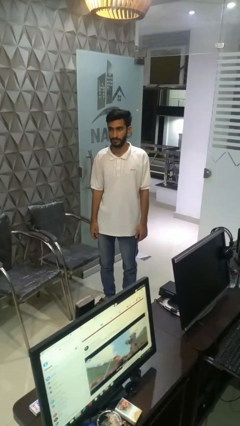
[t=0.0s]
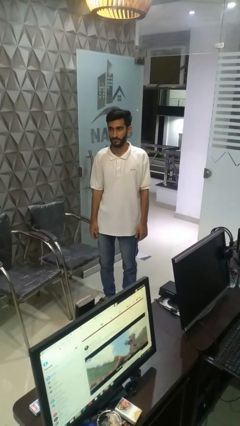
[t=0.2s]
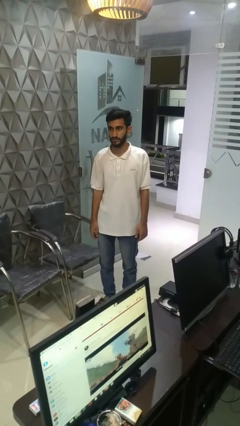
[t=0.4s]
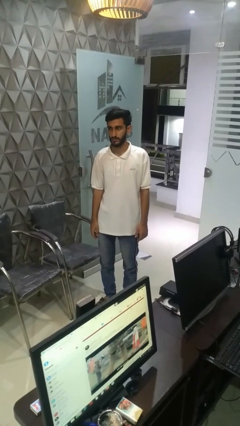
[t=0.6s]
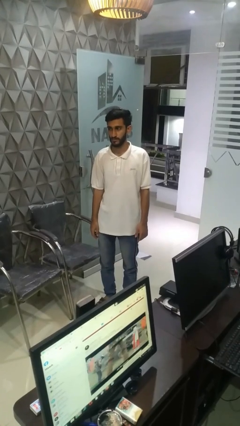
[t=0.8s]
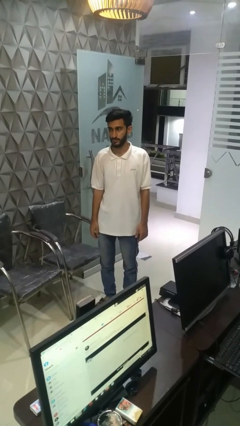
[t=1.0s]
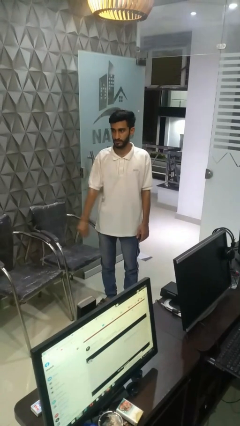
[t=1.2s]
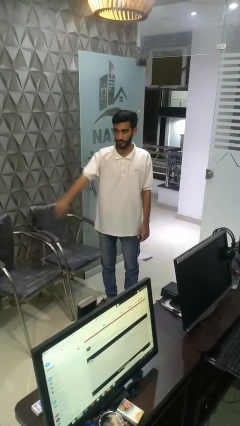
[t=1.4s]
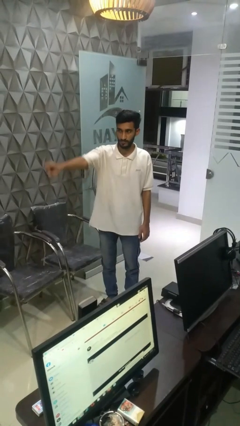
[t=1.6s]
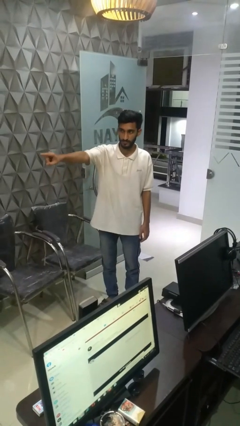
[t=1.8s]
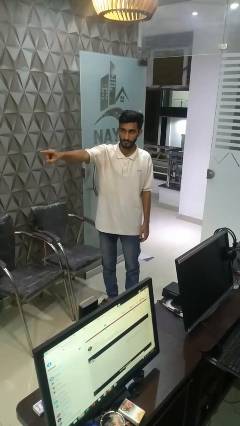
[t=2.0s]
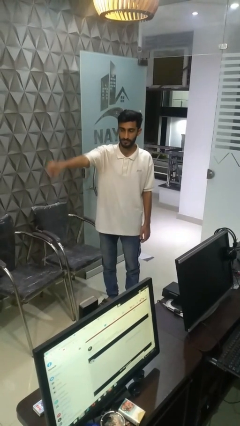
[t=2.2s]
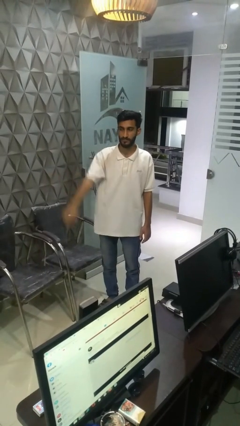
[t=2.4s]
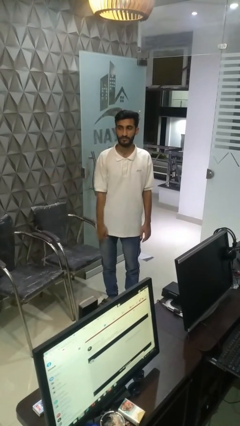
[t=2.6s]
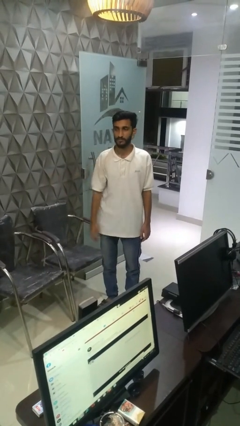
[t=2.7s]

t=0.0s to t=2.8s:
person points at person

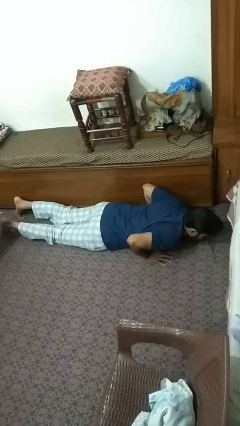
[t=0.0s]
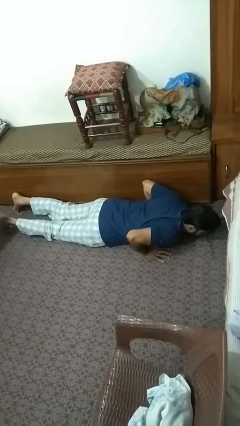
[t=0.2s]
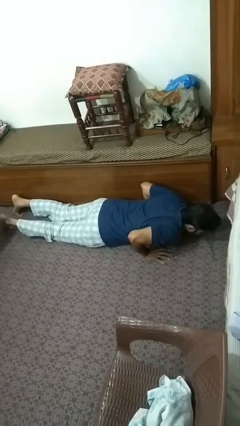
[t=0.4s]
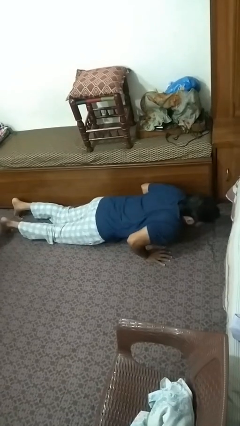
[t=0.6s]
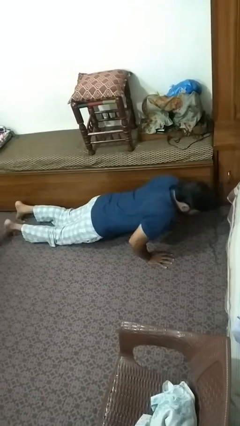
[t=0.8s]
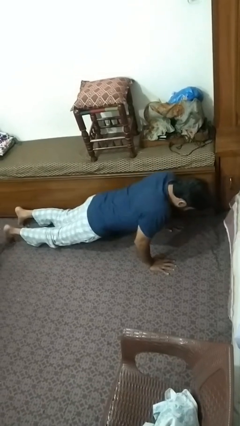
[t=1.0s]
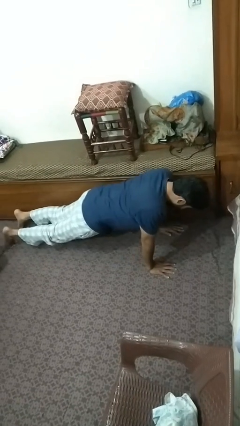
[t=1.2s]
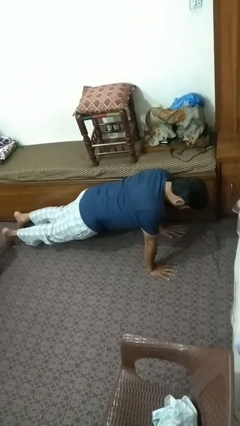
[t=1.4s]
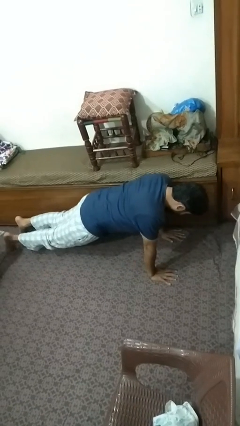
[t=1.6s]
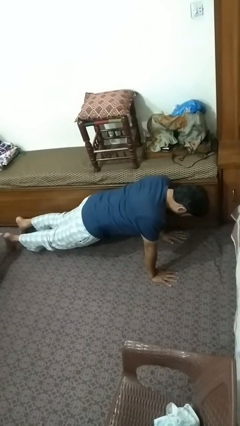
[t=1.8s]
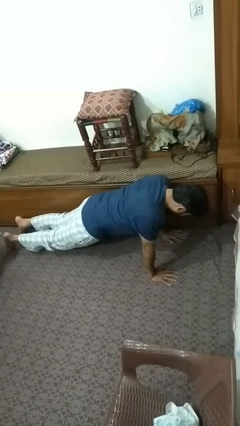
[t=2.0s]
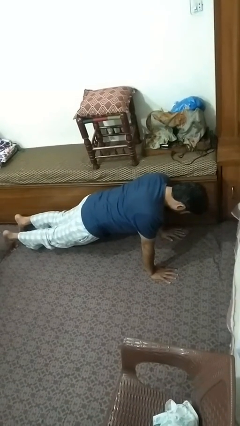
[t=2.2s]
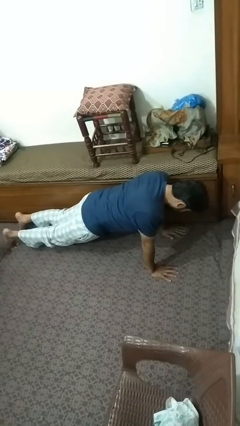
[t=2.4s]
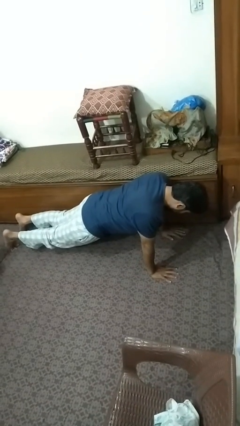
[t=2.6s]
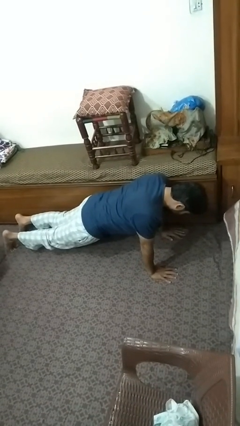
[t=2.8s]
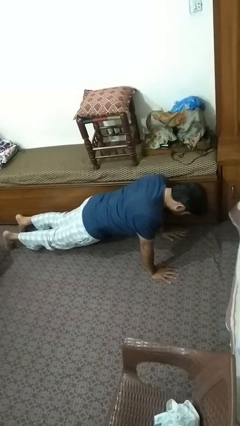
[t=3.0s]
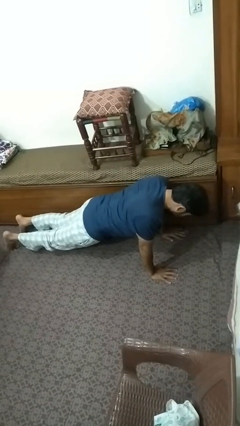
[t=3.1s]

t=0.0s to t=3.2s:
person exercises with pushup

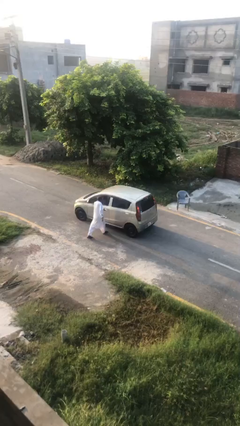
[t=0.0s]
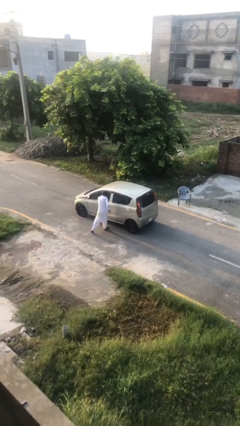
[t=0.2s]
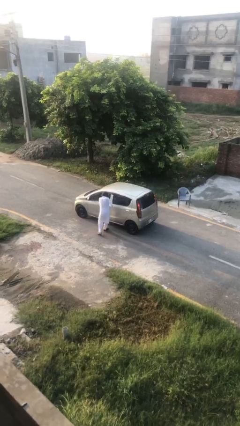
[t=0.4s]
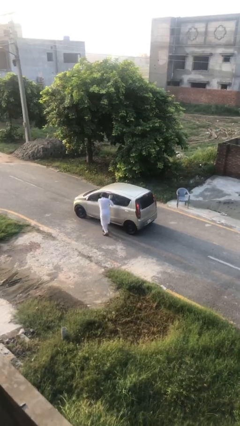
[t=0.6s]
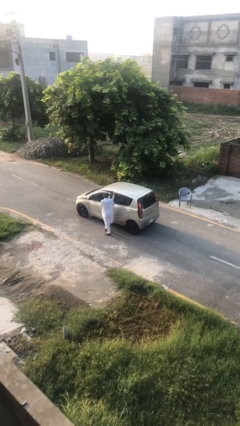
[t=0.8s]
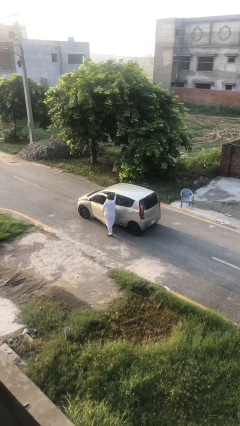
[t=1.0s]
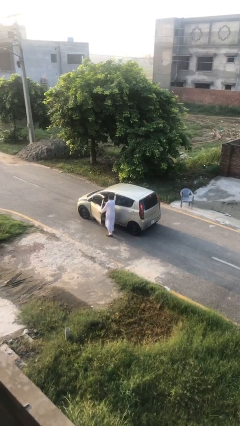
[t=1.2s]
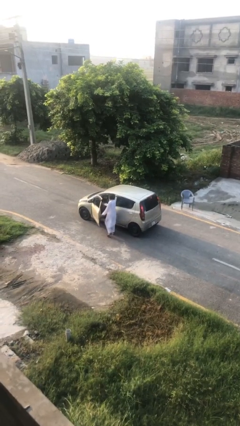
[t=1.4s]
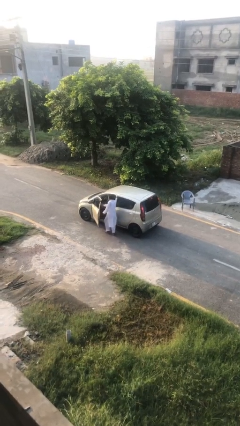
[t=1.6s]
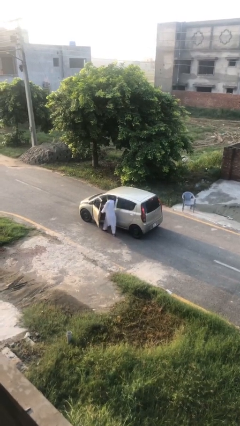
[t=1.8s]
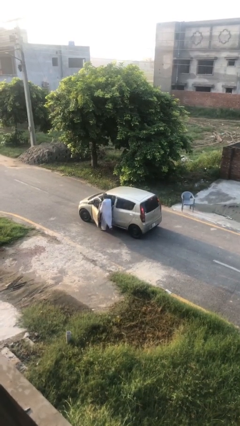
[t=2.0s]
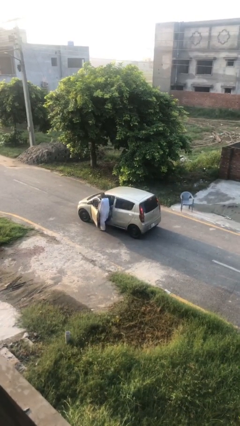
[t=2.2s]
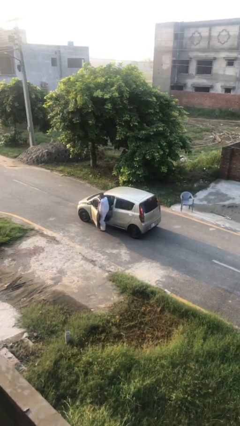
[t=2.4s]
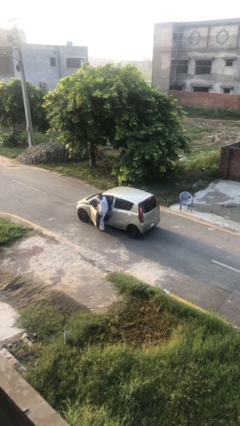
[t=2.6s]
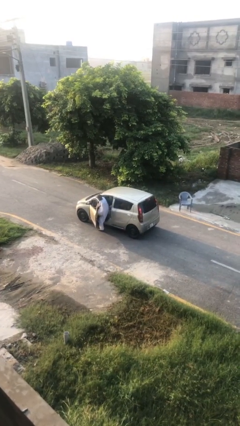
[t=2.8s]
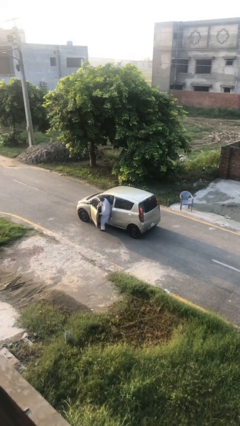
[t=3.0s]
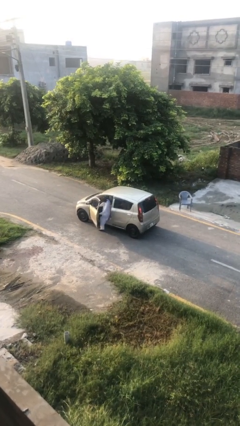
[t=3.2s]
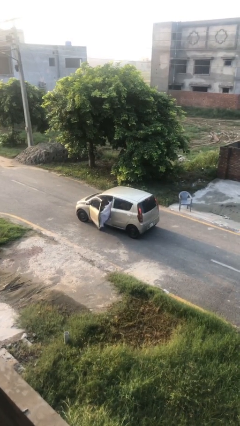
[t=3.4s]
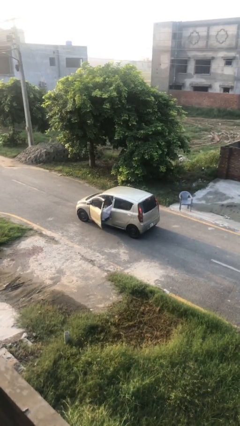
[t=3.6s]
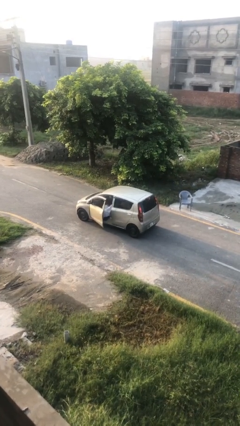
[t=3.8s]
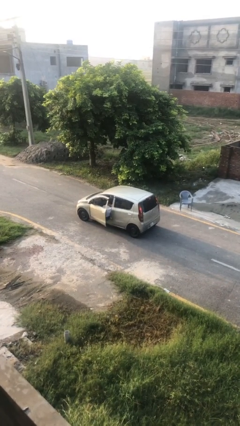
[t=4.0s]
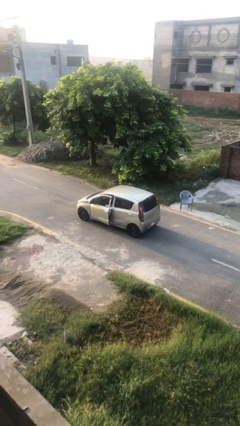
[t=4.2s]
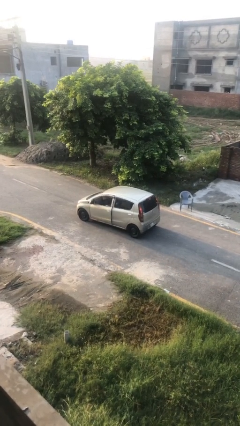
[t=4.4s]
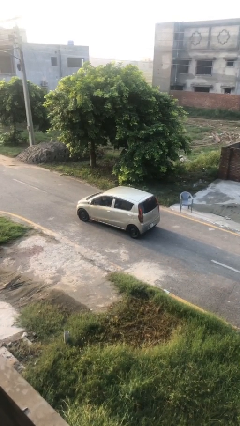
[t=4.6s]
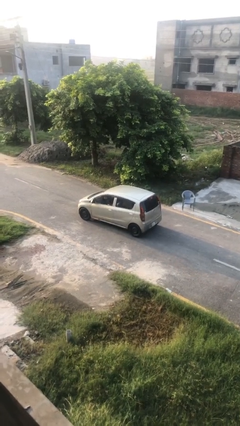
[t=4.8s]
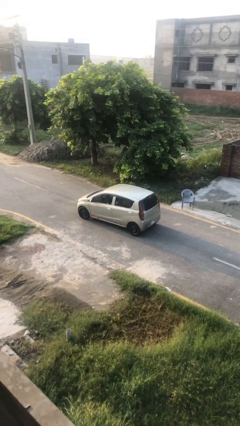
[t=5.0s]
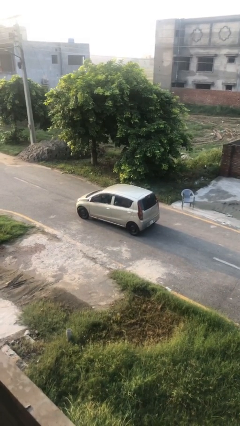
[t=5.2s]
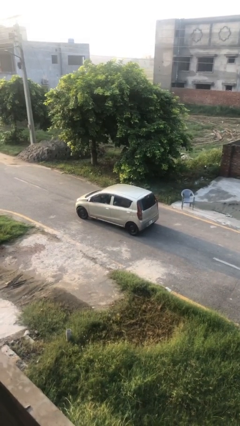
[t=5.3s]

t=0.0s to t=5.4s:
car picks up person

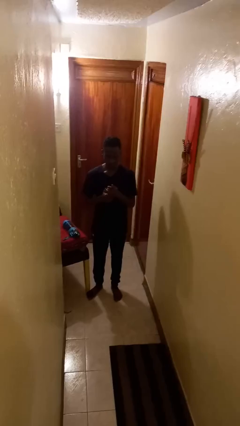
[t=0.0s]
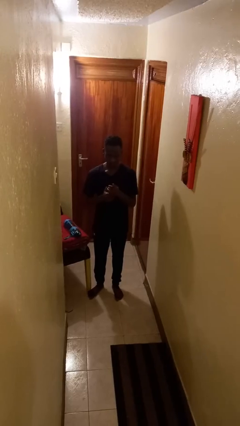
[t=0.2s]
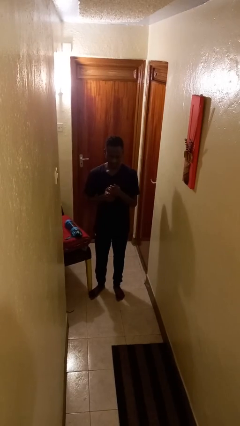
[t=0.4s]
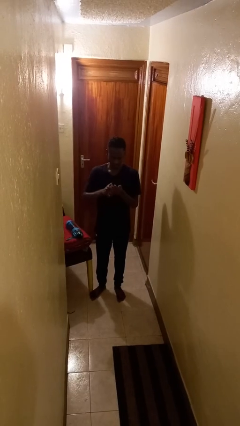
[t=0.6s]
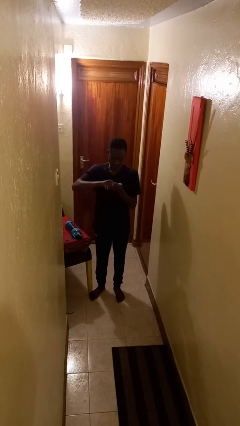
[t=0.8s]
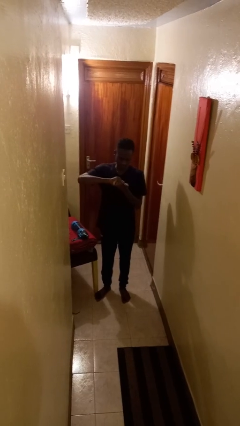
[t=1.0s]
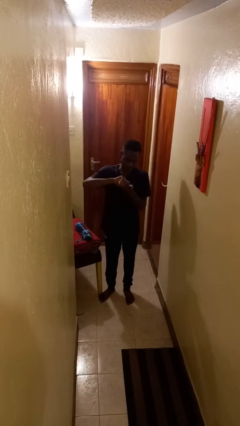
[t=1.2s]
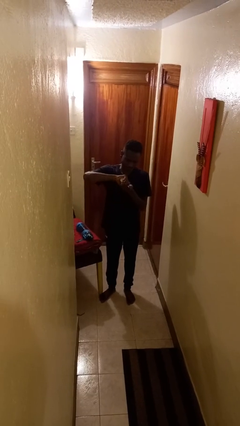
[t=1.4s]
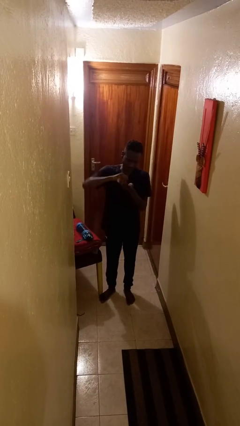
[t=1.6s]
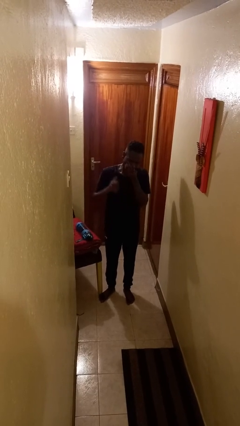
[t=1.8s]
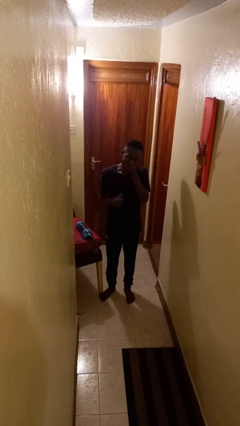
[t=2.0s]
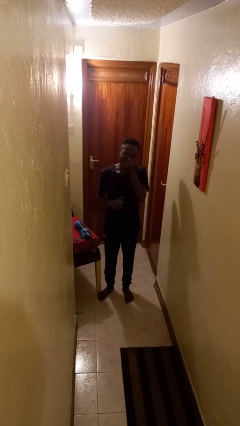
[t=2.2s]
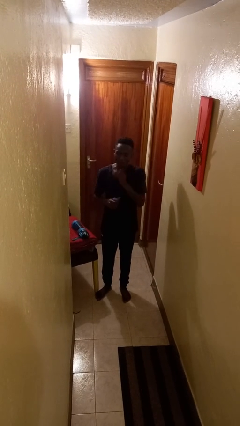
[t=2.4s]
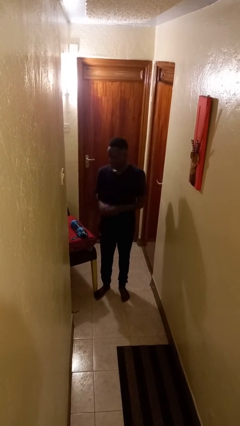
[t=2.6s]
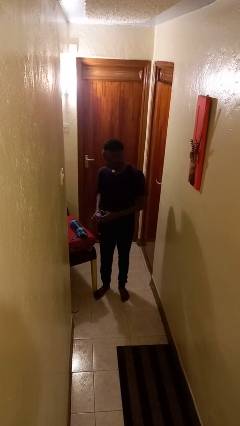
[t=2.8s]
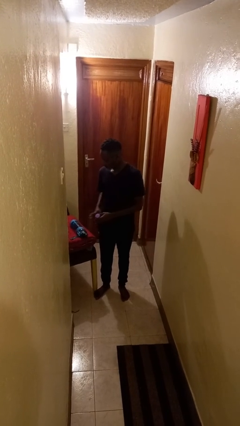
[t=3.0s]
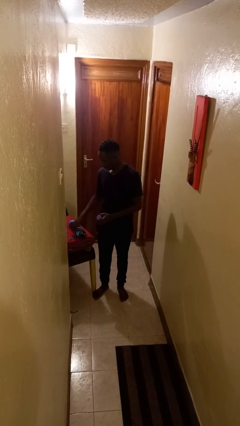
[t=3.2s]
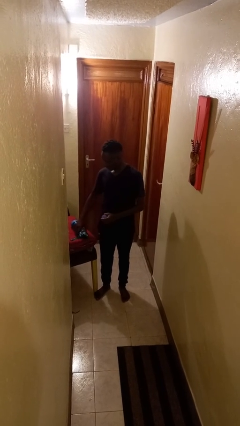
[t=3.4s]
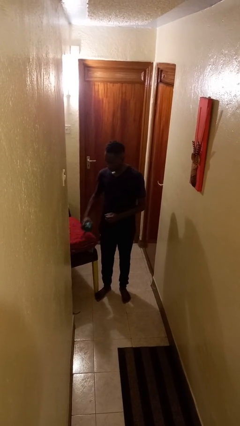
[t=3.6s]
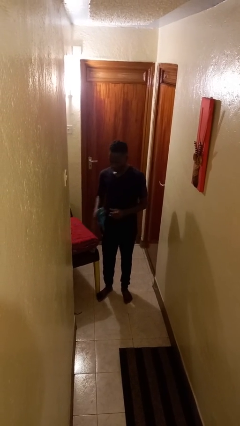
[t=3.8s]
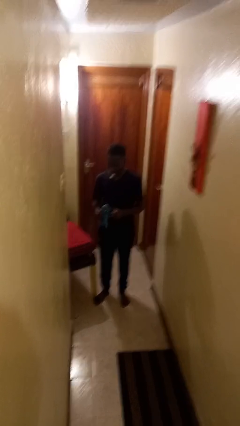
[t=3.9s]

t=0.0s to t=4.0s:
person takes medicine pills

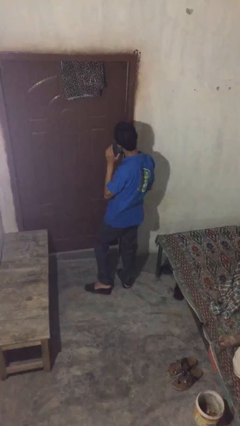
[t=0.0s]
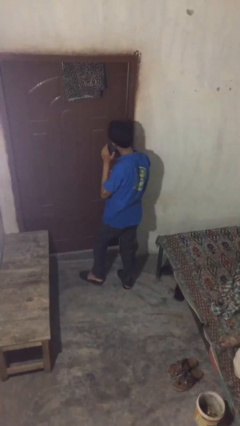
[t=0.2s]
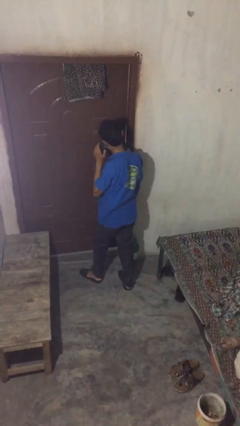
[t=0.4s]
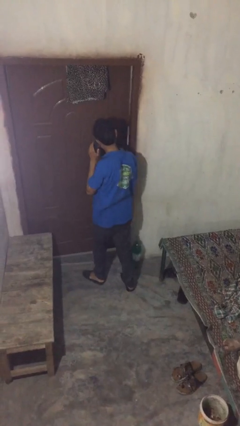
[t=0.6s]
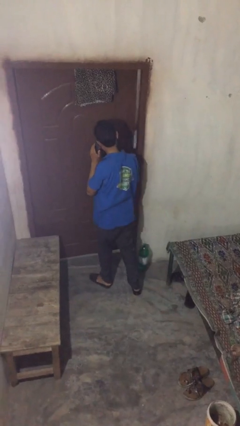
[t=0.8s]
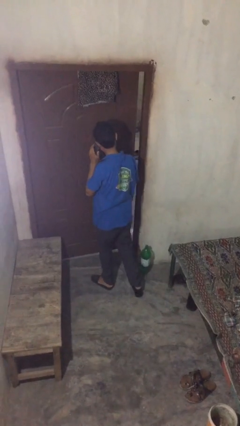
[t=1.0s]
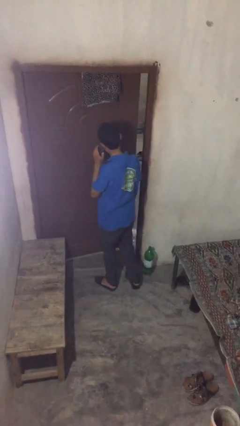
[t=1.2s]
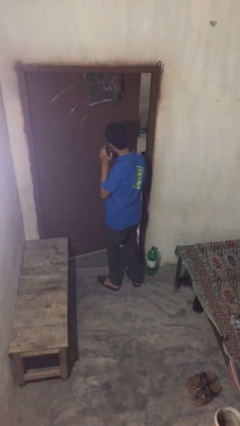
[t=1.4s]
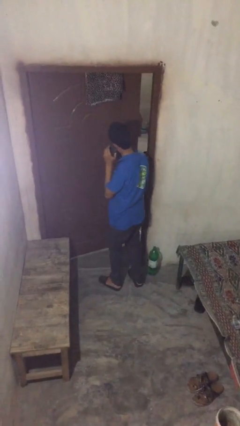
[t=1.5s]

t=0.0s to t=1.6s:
person opens facility door

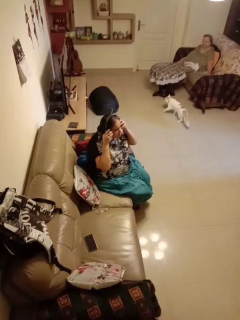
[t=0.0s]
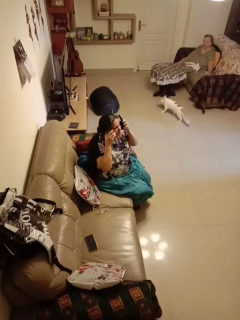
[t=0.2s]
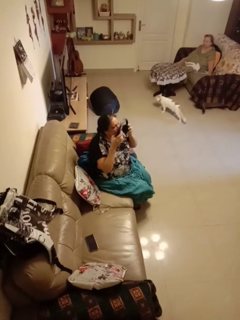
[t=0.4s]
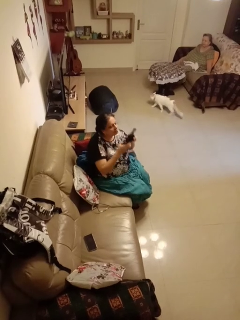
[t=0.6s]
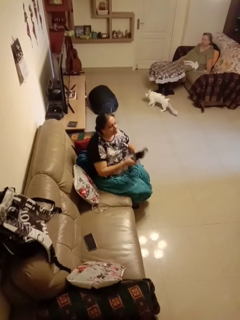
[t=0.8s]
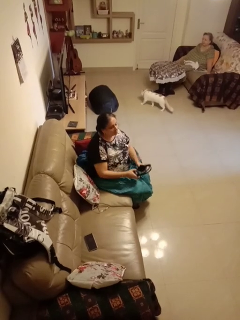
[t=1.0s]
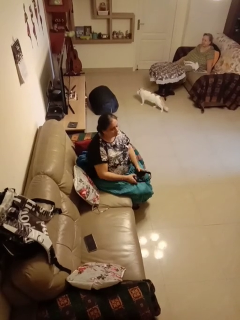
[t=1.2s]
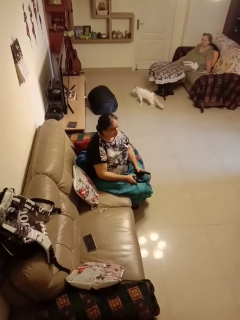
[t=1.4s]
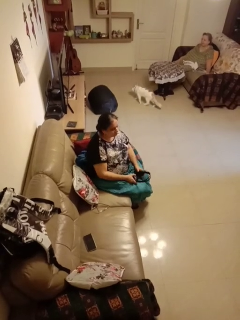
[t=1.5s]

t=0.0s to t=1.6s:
person takes off headphones
